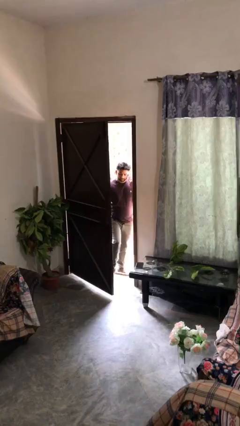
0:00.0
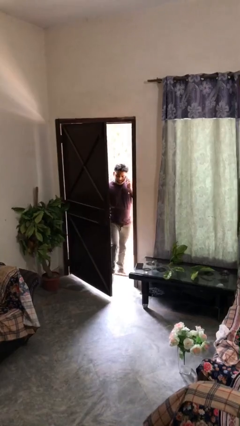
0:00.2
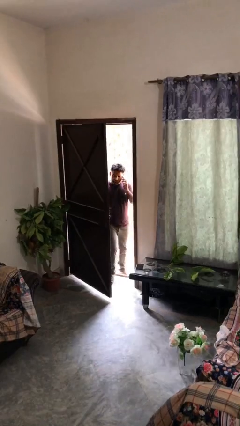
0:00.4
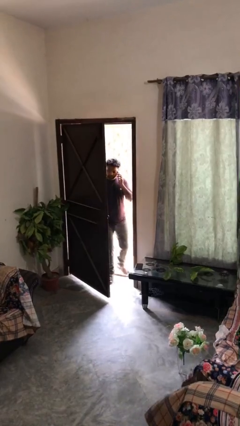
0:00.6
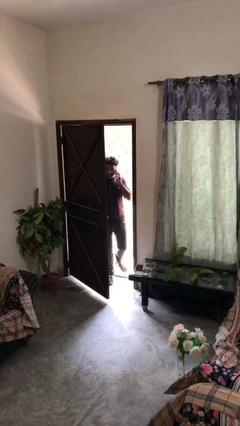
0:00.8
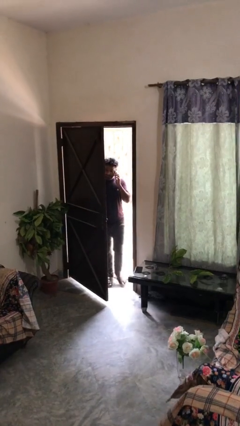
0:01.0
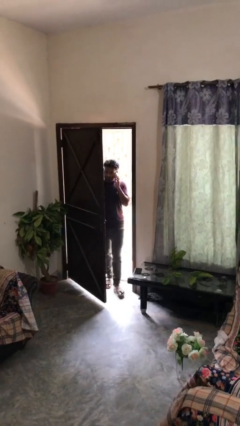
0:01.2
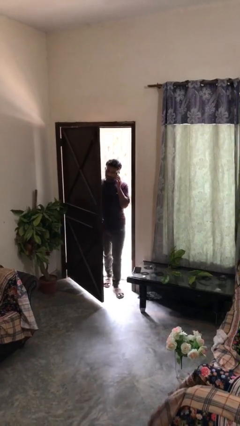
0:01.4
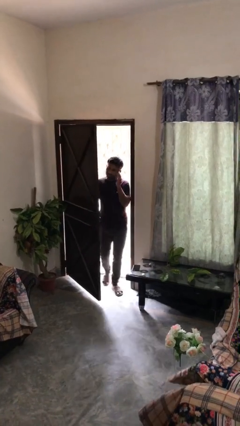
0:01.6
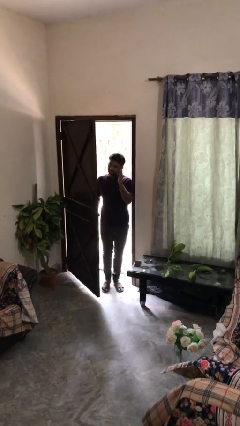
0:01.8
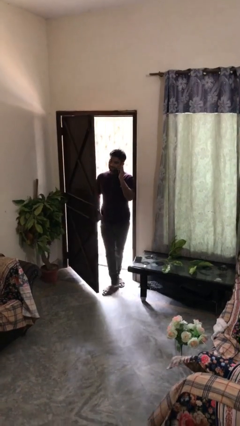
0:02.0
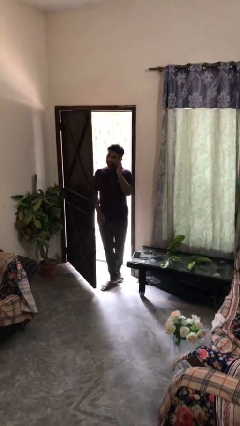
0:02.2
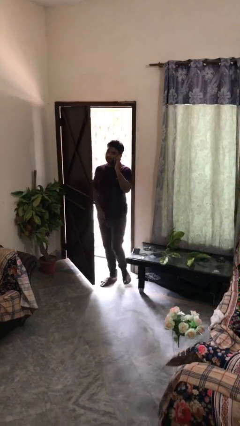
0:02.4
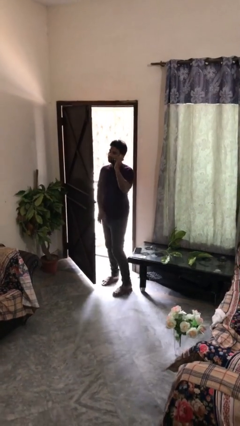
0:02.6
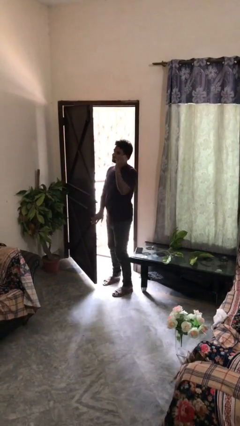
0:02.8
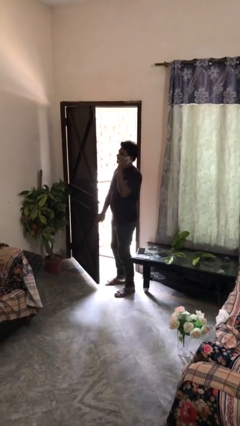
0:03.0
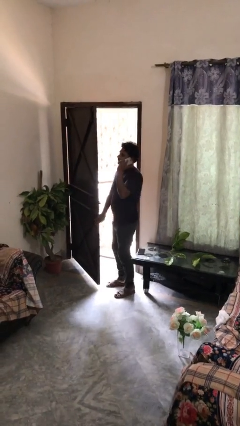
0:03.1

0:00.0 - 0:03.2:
person enters scene through structure

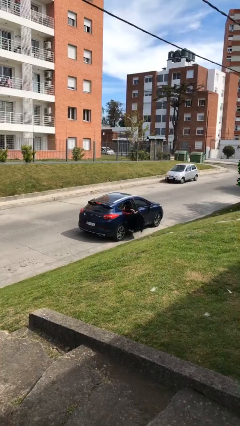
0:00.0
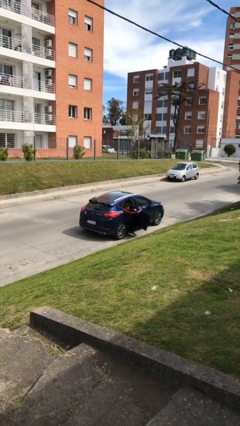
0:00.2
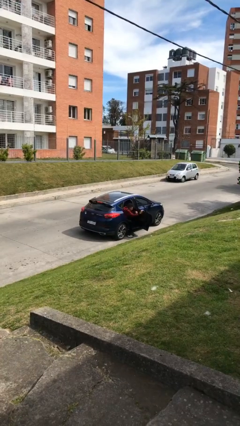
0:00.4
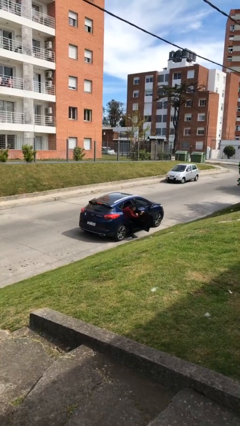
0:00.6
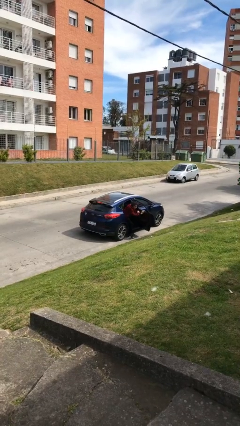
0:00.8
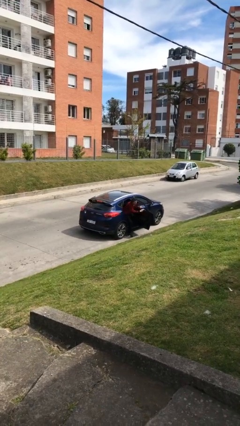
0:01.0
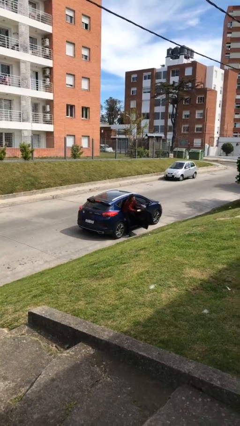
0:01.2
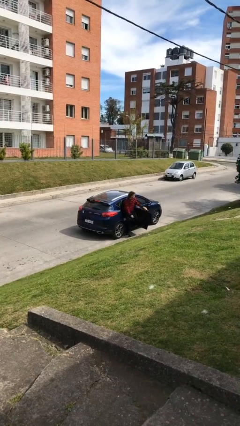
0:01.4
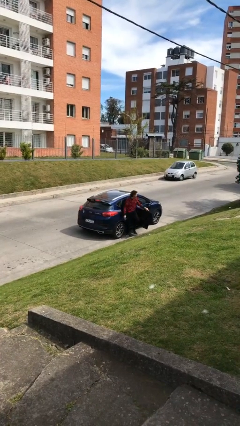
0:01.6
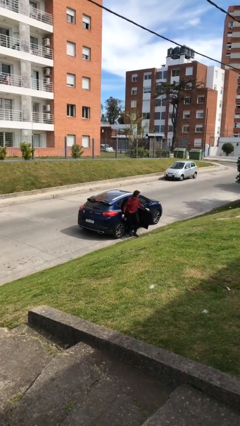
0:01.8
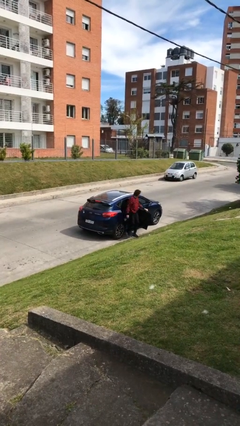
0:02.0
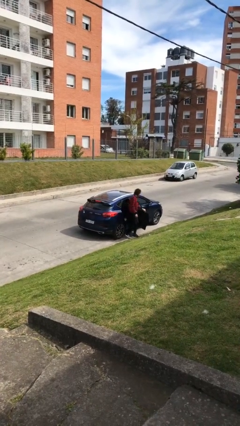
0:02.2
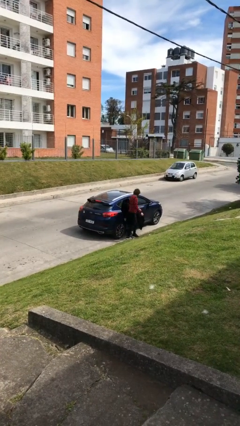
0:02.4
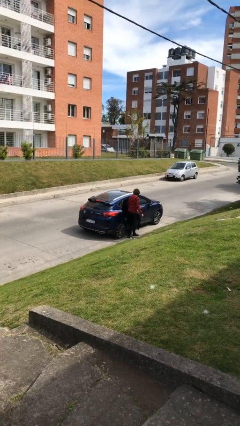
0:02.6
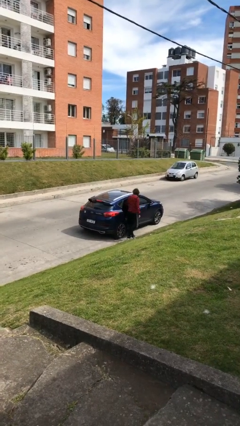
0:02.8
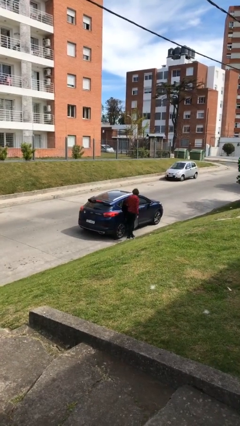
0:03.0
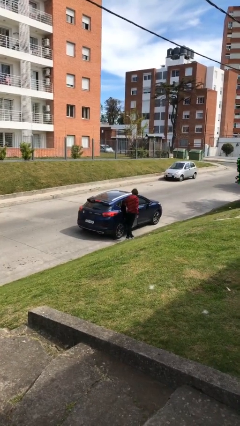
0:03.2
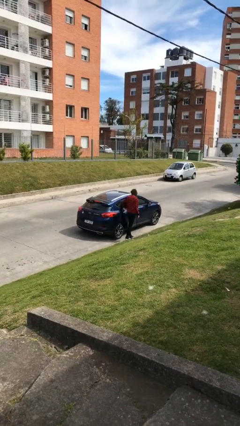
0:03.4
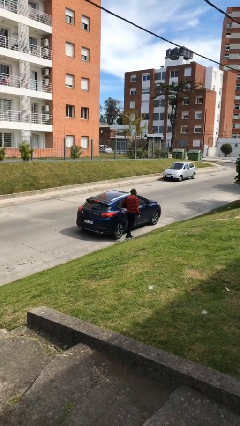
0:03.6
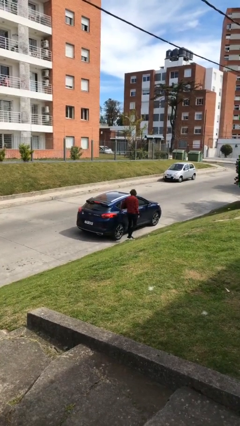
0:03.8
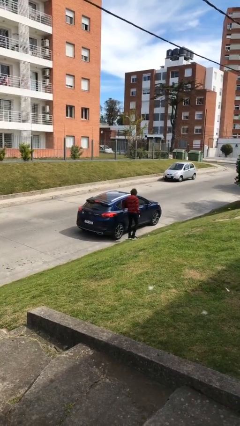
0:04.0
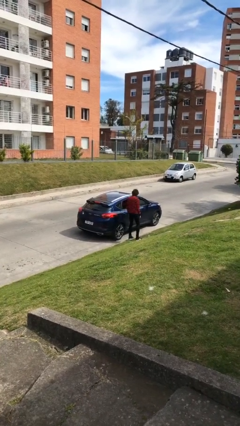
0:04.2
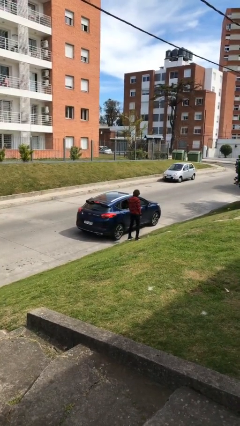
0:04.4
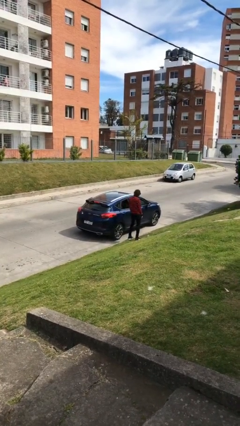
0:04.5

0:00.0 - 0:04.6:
car drops off person

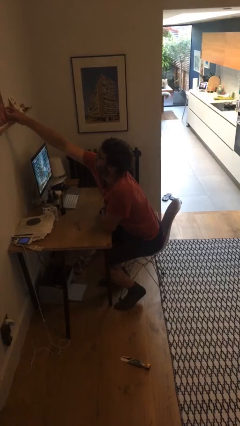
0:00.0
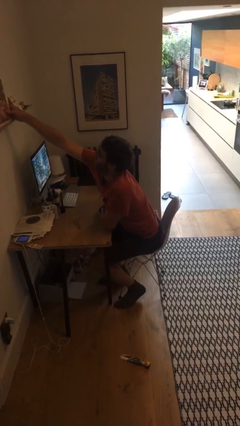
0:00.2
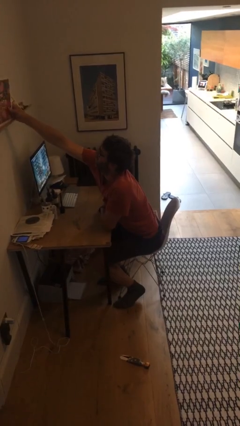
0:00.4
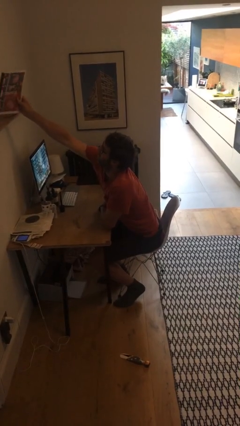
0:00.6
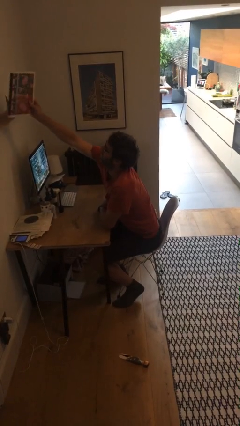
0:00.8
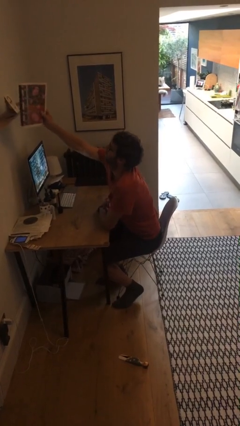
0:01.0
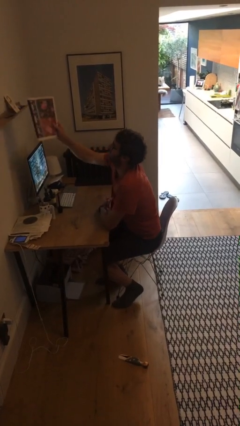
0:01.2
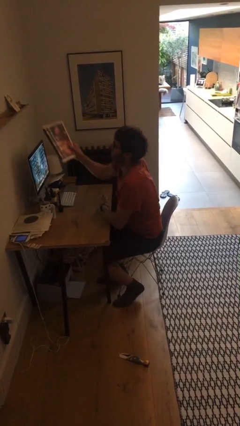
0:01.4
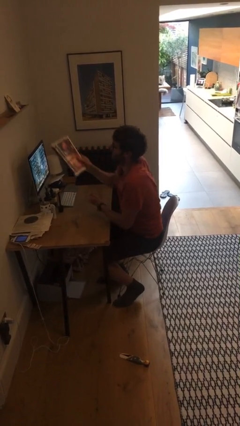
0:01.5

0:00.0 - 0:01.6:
person picks up object from shelf

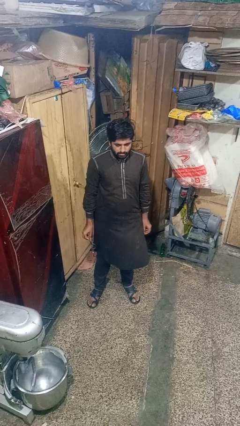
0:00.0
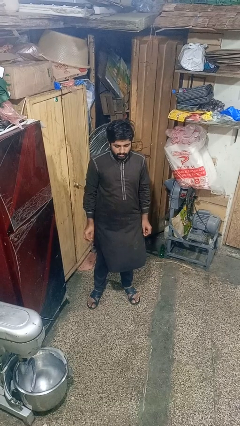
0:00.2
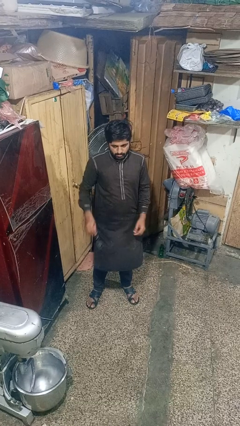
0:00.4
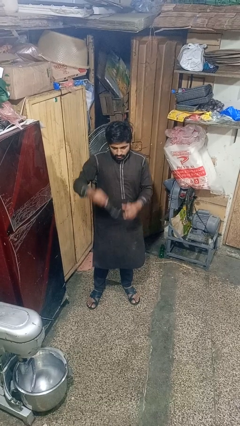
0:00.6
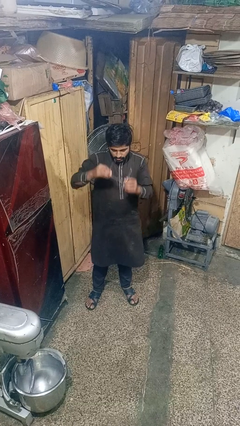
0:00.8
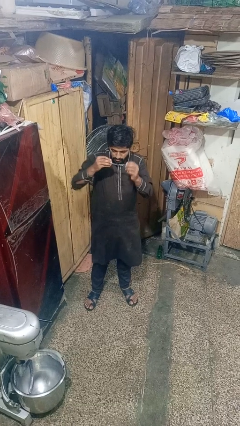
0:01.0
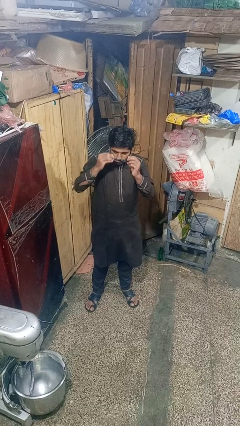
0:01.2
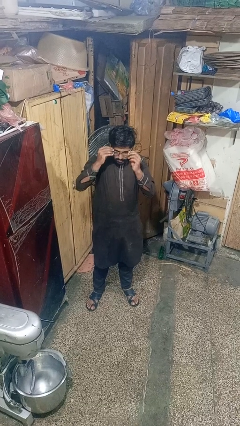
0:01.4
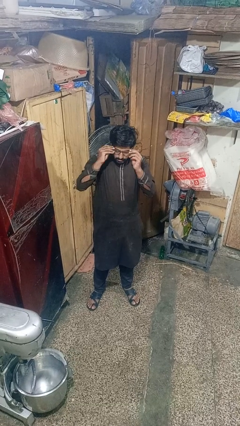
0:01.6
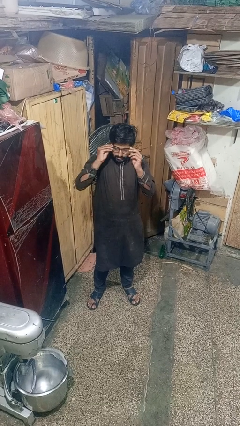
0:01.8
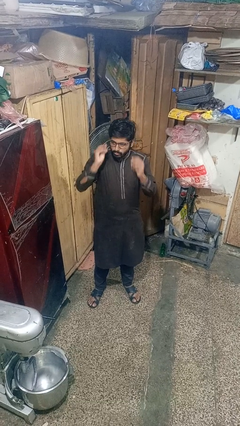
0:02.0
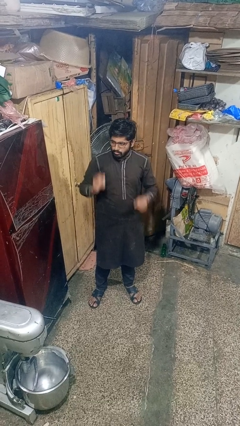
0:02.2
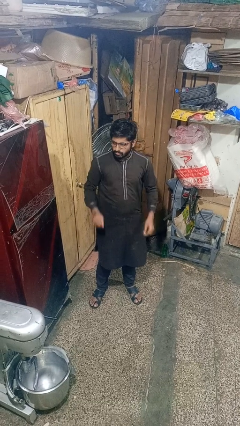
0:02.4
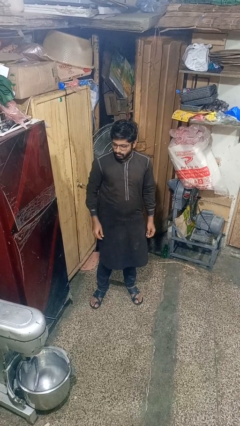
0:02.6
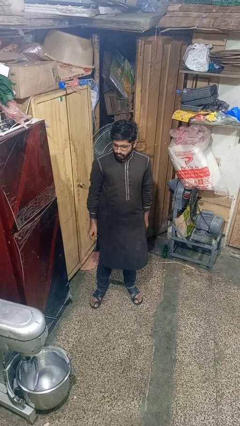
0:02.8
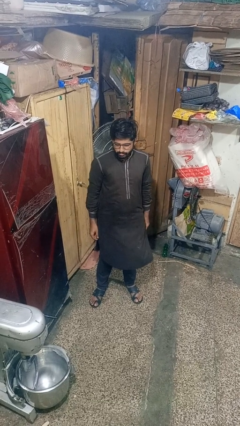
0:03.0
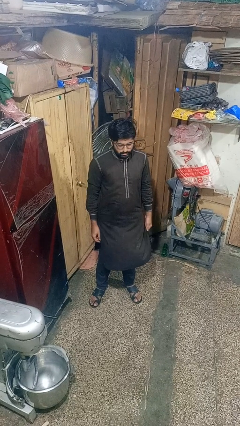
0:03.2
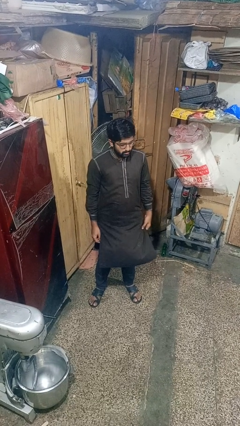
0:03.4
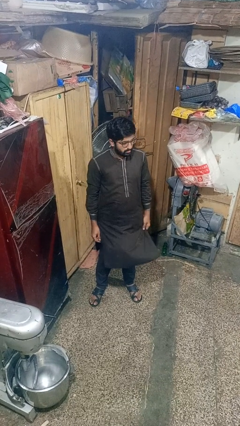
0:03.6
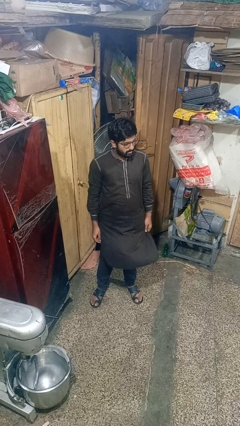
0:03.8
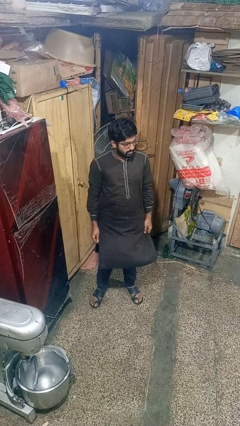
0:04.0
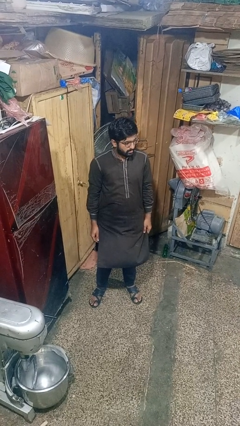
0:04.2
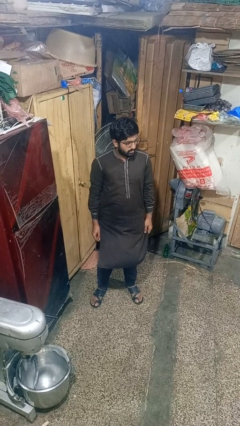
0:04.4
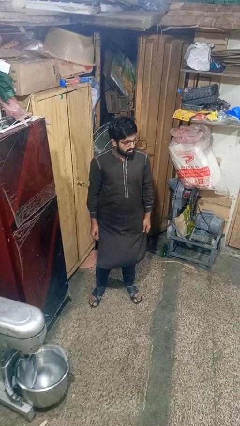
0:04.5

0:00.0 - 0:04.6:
person puts on glasses

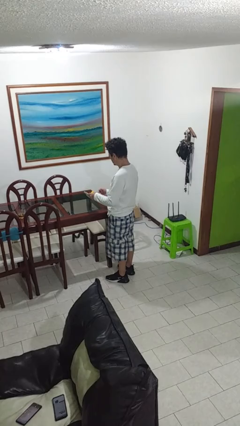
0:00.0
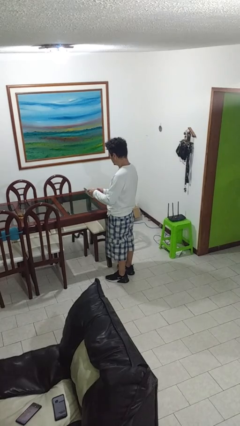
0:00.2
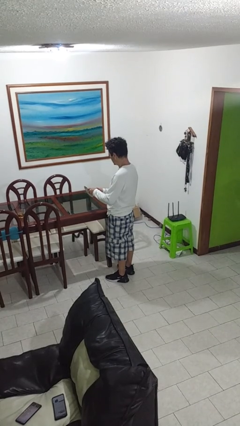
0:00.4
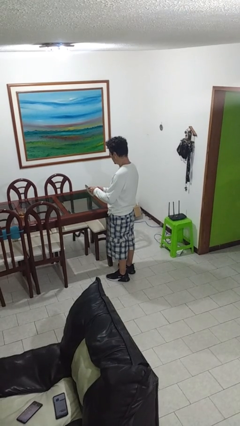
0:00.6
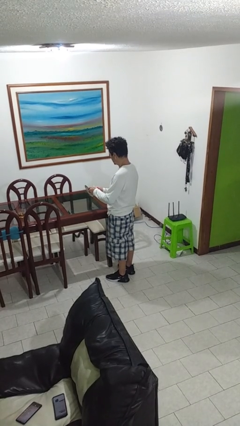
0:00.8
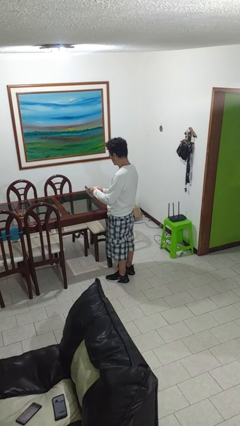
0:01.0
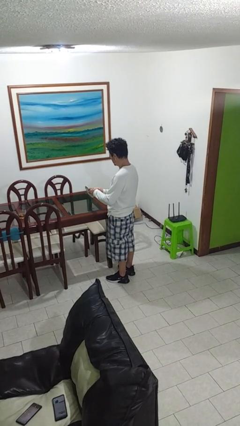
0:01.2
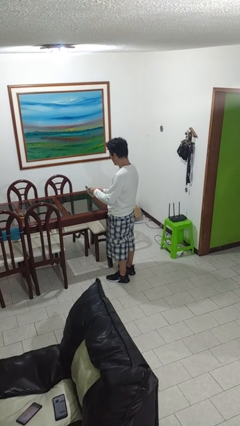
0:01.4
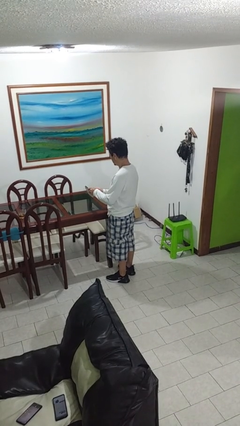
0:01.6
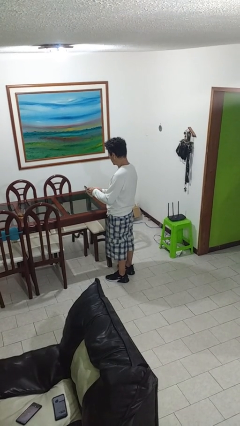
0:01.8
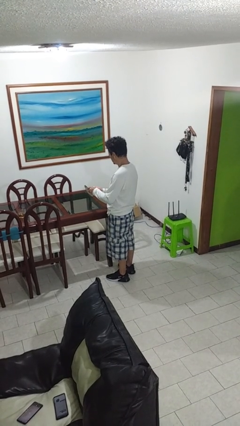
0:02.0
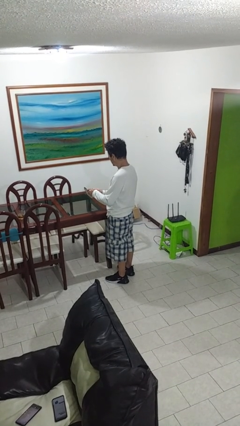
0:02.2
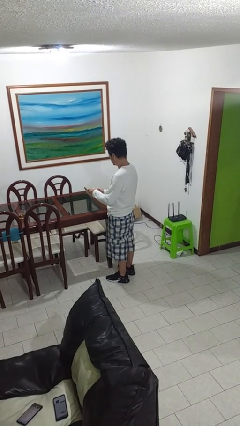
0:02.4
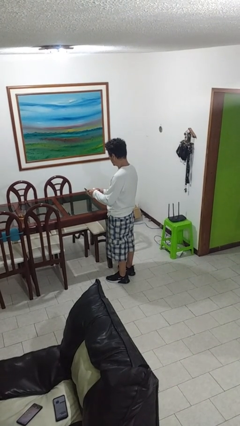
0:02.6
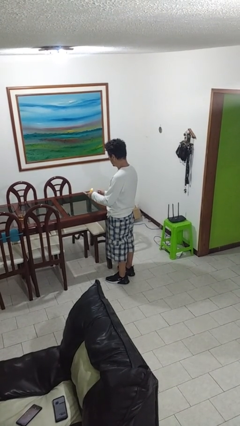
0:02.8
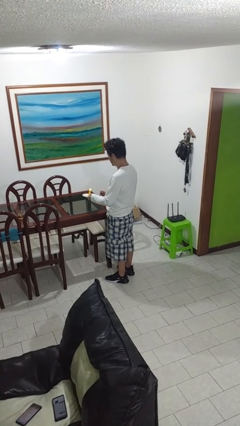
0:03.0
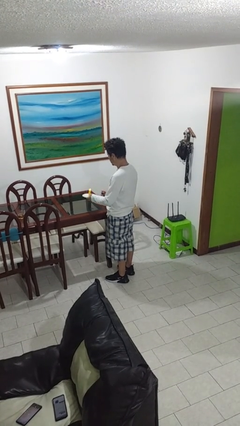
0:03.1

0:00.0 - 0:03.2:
person lights candle
